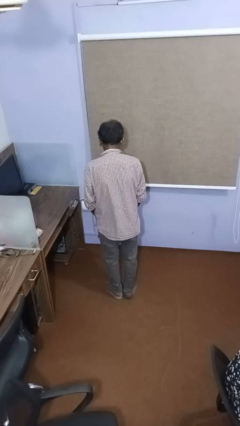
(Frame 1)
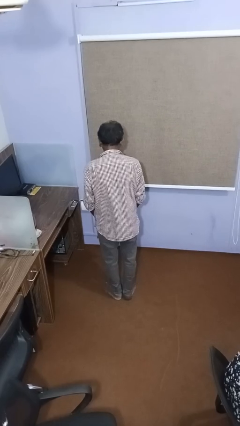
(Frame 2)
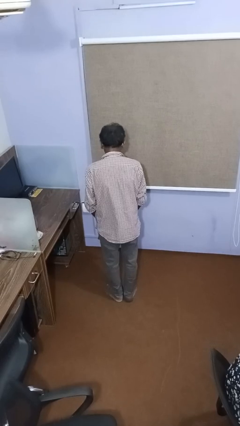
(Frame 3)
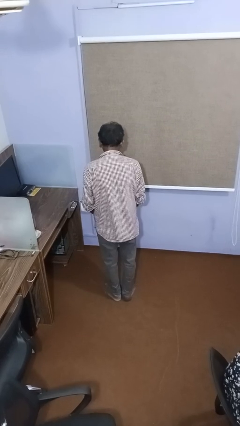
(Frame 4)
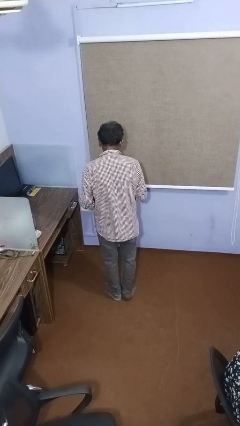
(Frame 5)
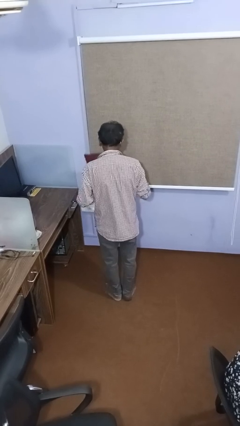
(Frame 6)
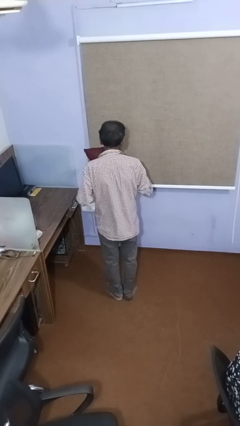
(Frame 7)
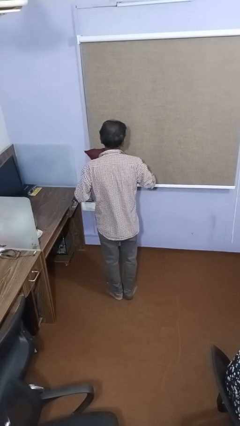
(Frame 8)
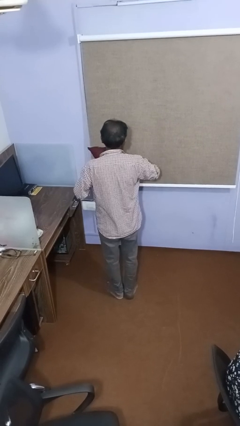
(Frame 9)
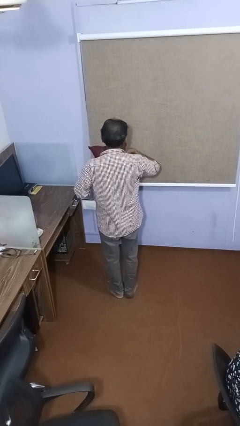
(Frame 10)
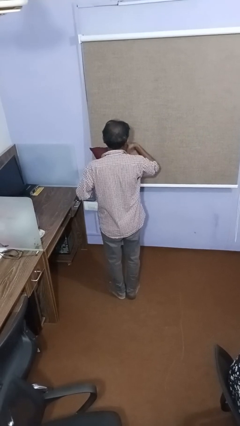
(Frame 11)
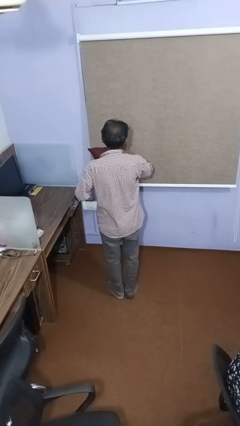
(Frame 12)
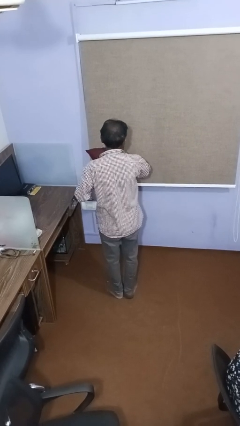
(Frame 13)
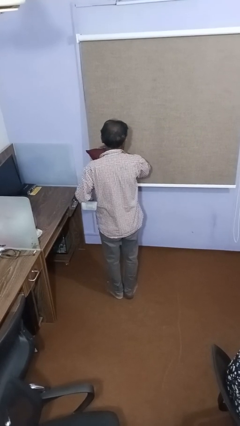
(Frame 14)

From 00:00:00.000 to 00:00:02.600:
person hugs stuffed animal

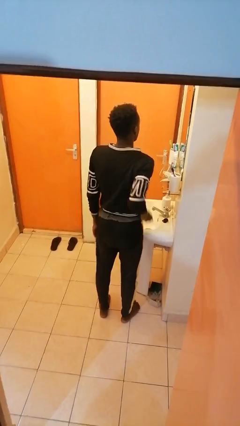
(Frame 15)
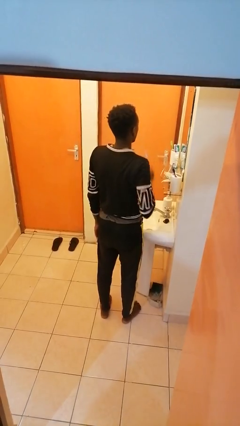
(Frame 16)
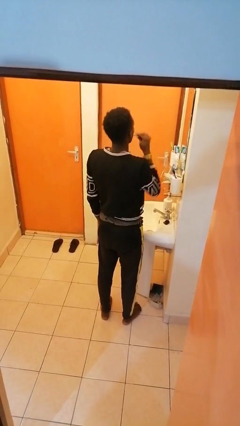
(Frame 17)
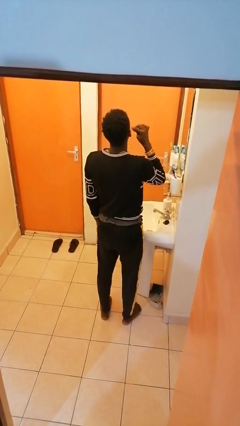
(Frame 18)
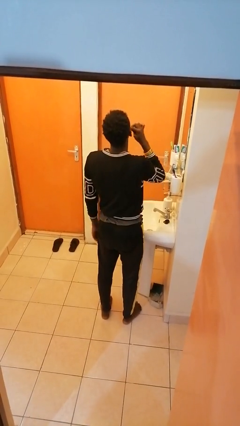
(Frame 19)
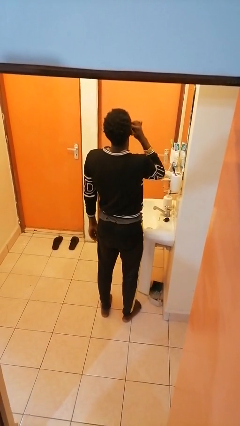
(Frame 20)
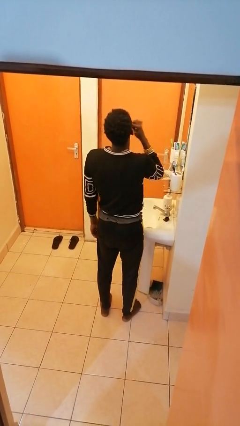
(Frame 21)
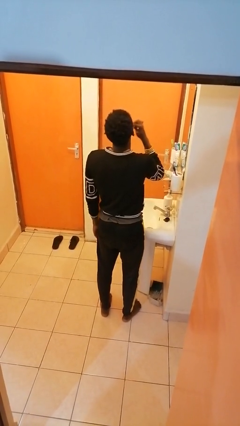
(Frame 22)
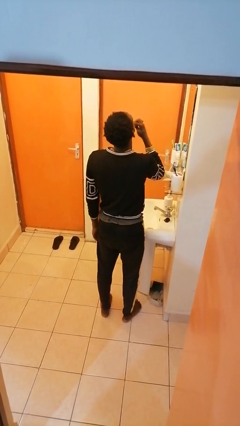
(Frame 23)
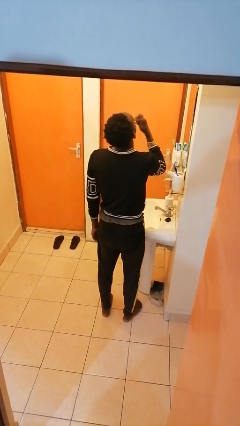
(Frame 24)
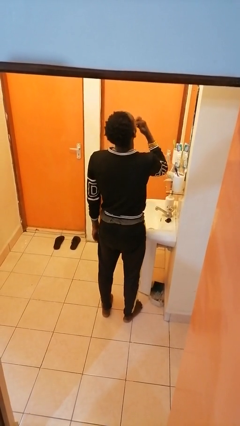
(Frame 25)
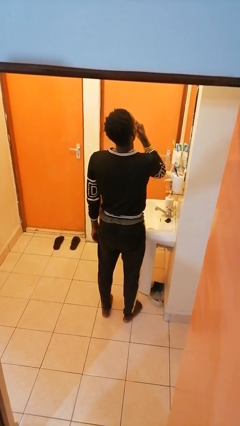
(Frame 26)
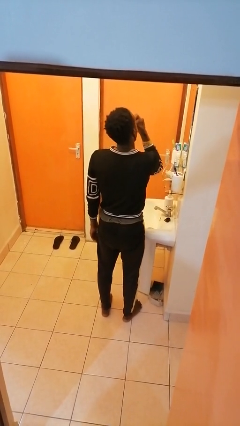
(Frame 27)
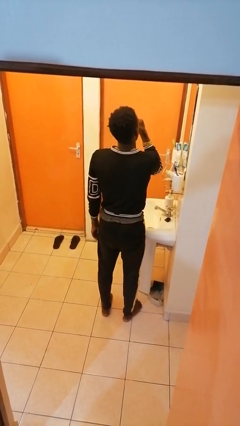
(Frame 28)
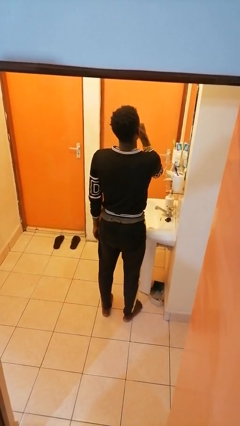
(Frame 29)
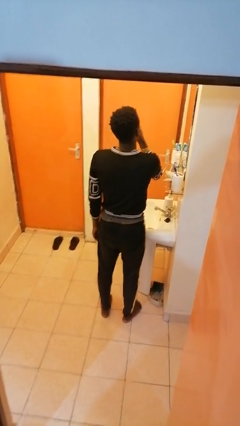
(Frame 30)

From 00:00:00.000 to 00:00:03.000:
person brushes teeth

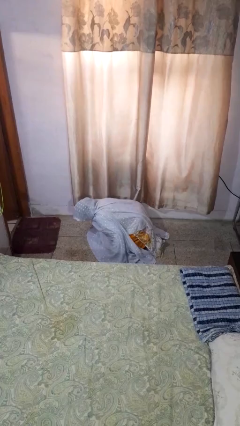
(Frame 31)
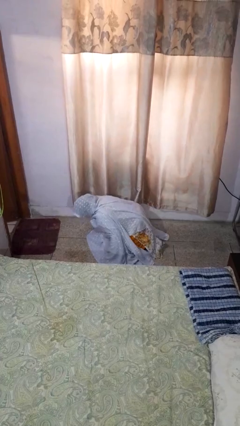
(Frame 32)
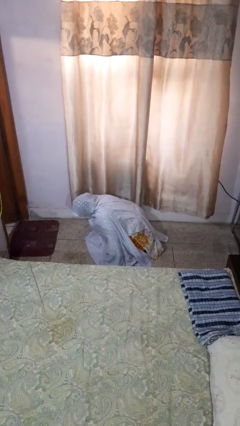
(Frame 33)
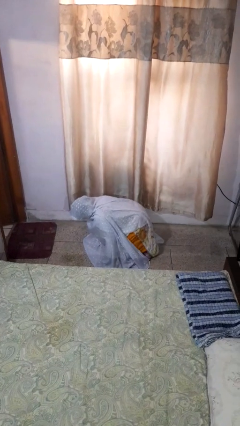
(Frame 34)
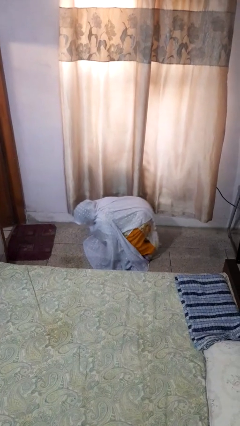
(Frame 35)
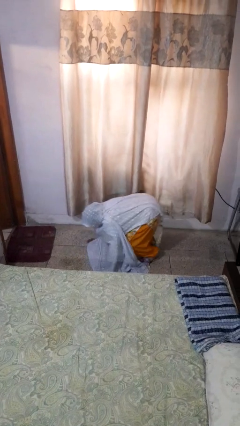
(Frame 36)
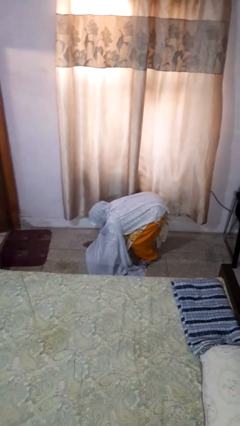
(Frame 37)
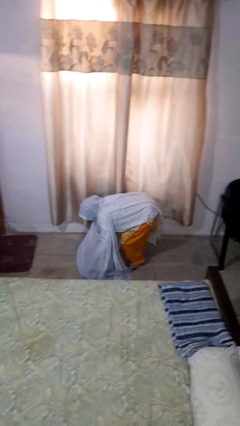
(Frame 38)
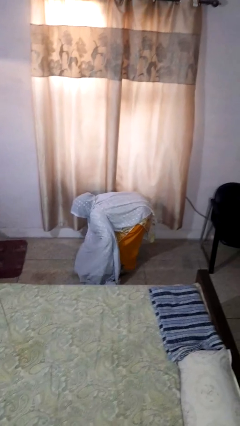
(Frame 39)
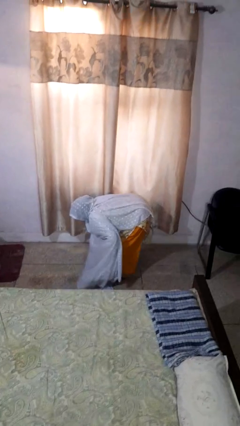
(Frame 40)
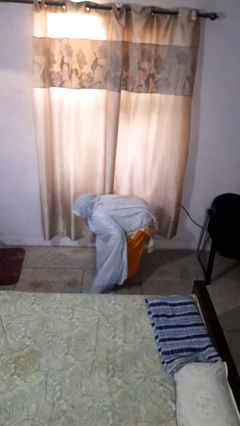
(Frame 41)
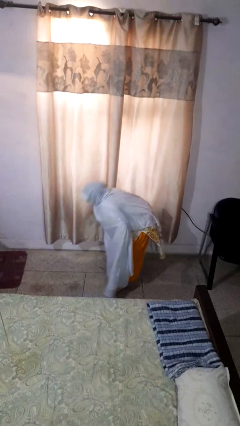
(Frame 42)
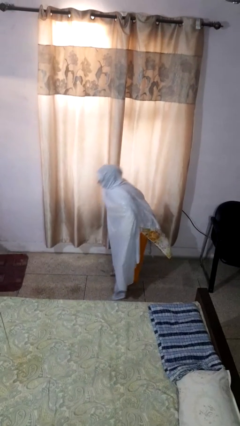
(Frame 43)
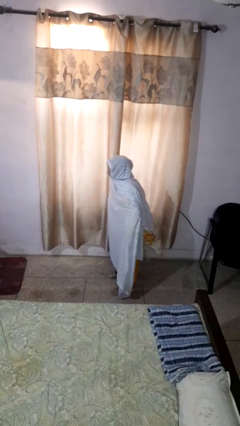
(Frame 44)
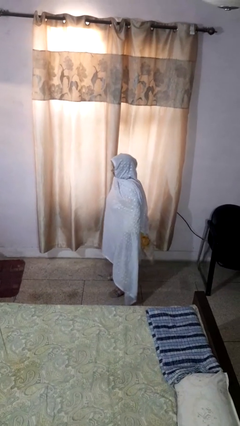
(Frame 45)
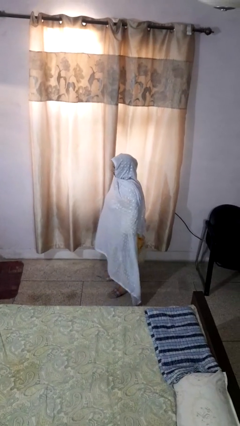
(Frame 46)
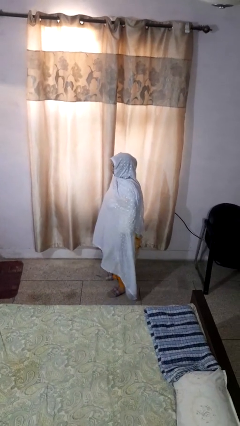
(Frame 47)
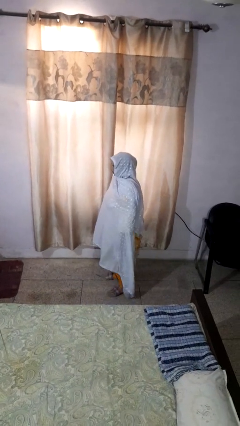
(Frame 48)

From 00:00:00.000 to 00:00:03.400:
person stands up from floor

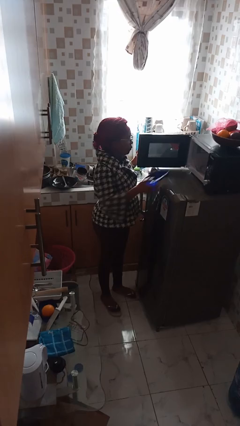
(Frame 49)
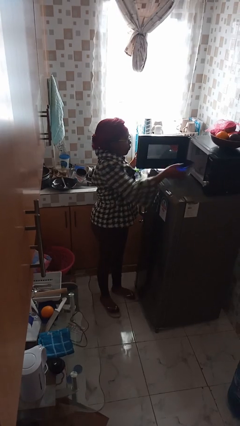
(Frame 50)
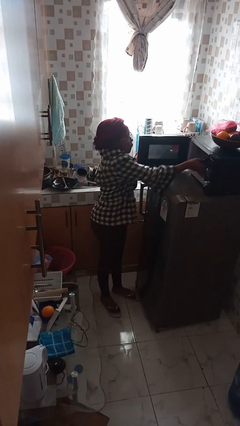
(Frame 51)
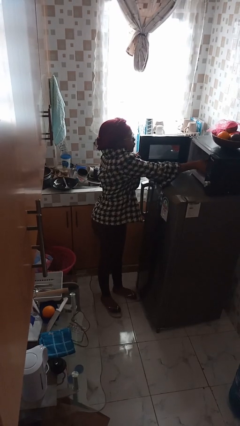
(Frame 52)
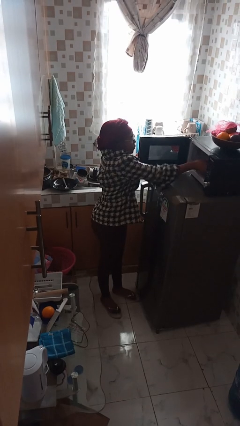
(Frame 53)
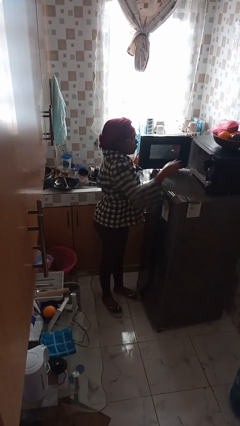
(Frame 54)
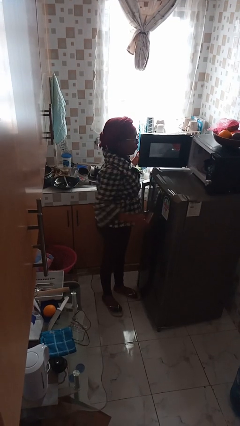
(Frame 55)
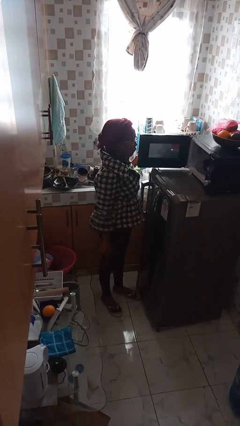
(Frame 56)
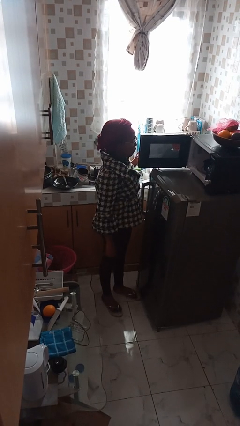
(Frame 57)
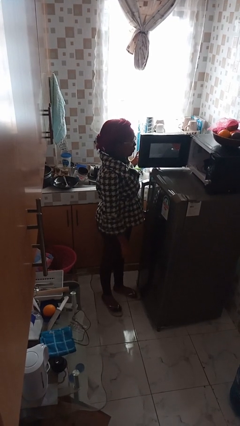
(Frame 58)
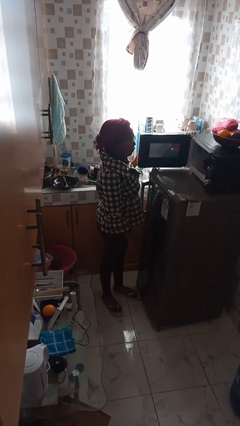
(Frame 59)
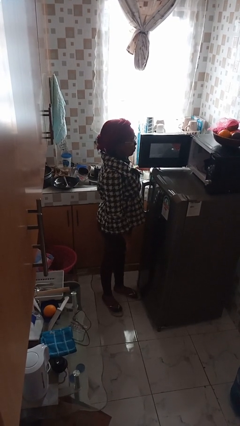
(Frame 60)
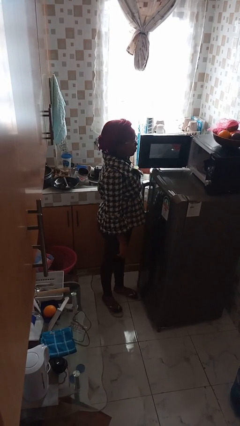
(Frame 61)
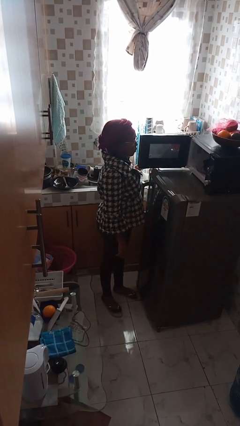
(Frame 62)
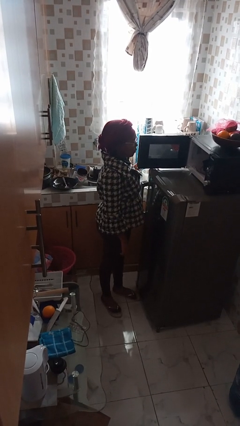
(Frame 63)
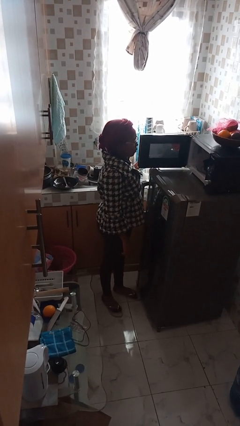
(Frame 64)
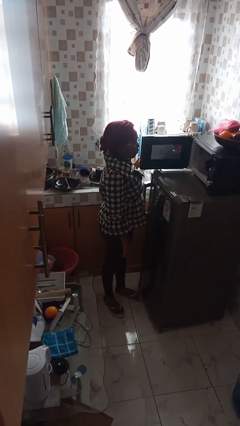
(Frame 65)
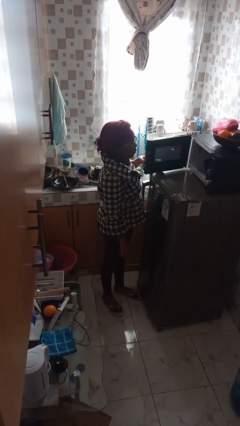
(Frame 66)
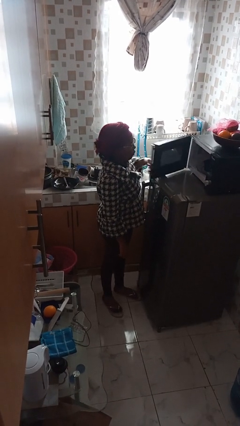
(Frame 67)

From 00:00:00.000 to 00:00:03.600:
person puts object into microwave

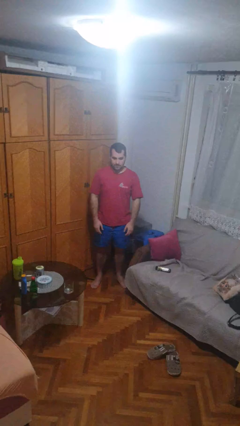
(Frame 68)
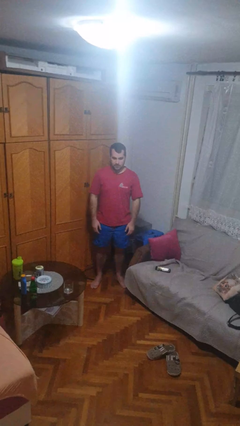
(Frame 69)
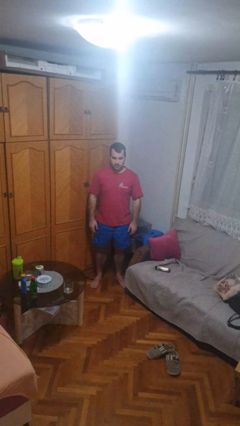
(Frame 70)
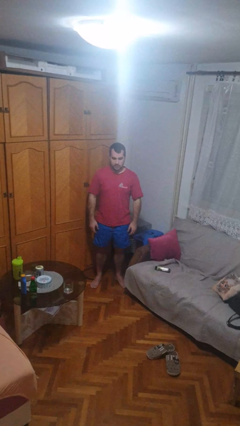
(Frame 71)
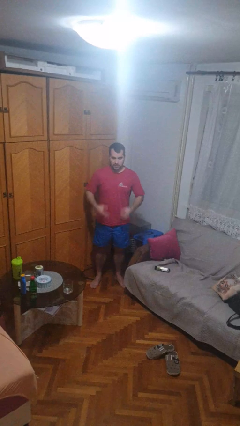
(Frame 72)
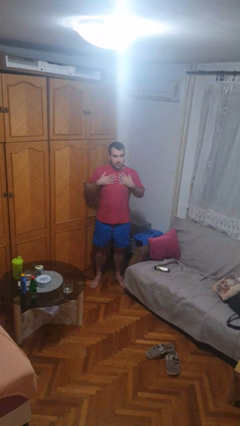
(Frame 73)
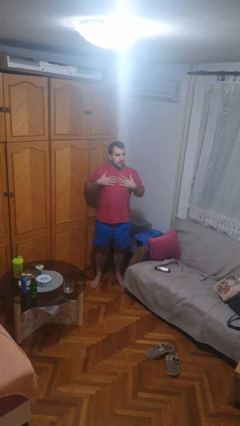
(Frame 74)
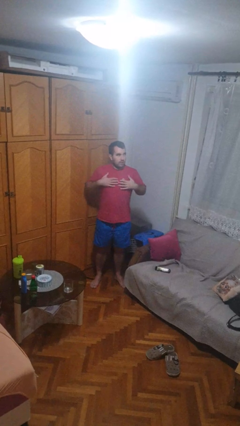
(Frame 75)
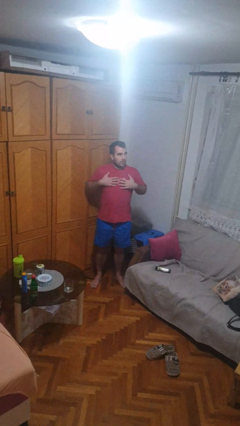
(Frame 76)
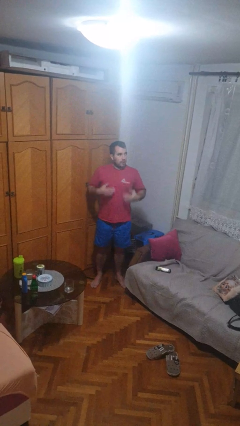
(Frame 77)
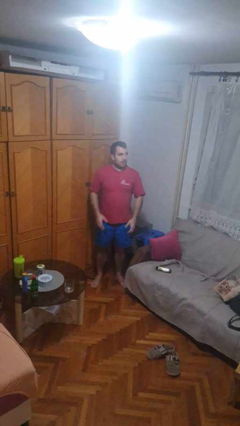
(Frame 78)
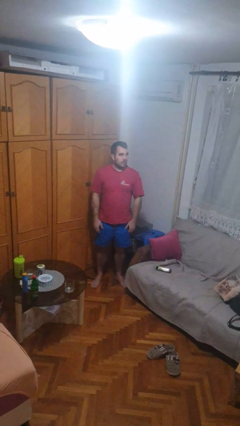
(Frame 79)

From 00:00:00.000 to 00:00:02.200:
person drums on chest

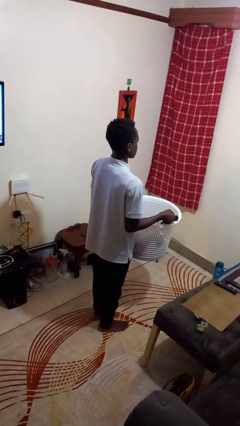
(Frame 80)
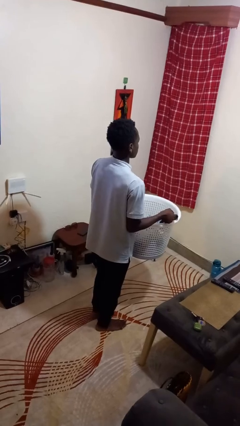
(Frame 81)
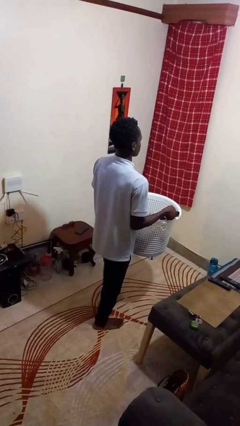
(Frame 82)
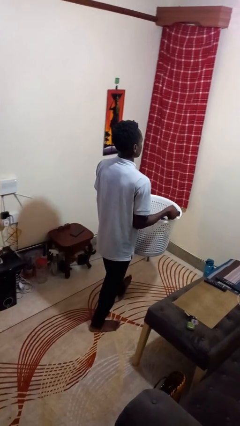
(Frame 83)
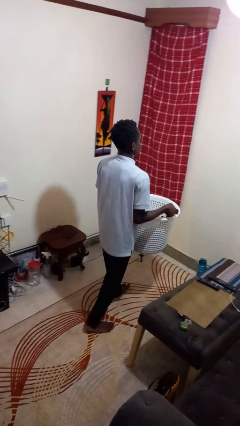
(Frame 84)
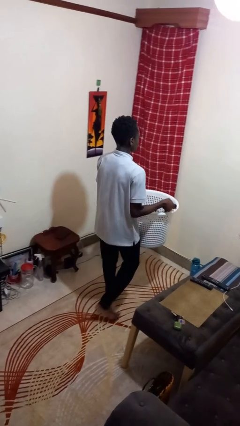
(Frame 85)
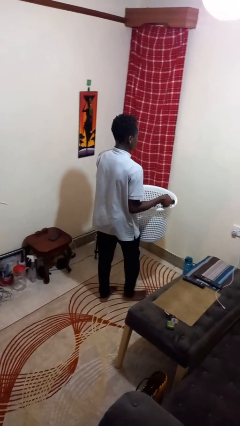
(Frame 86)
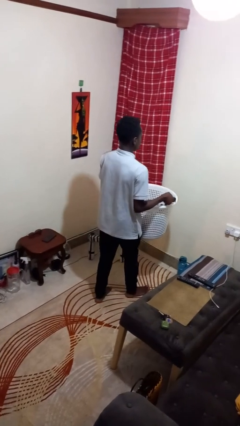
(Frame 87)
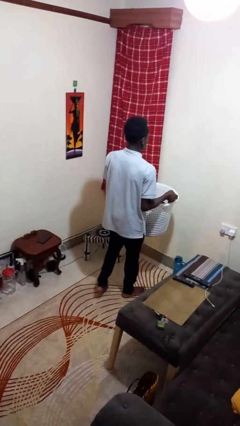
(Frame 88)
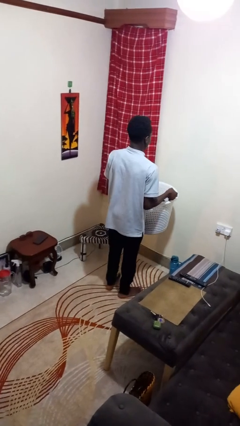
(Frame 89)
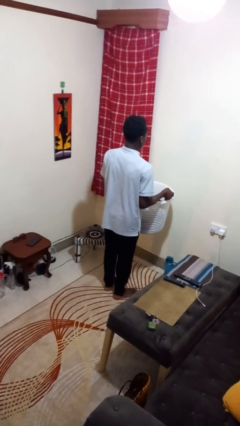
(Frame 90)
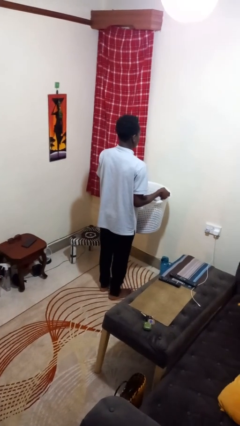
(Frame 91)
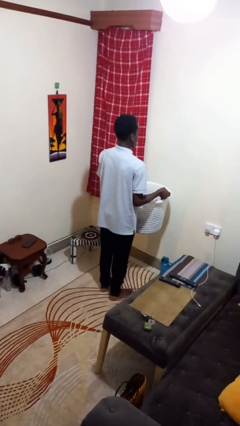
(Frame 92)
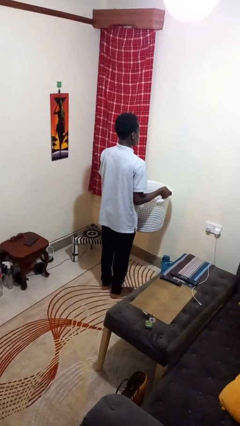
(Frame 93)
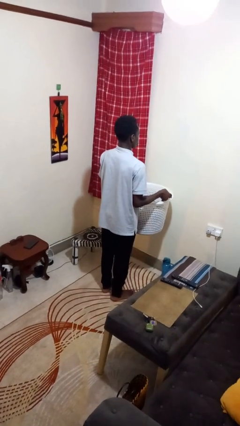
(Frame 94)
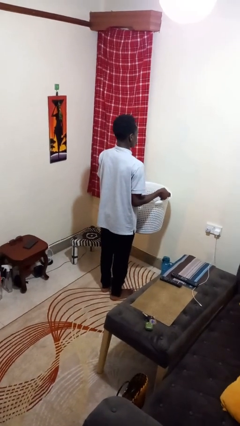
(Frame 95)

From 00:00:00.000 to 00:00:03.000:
person carries laundry basket
